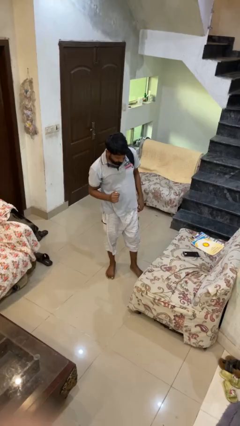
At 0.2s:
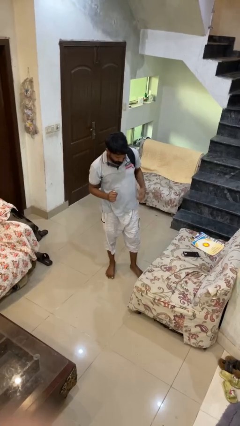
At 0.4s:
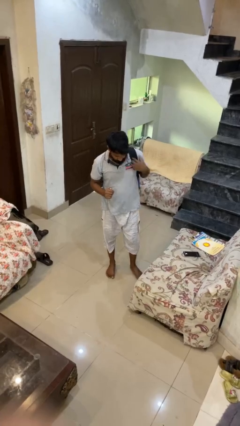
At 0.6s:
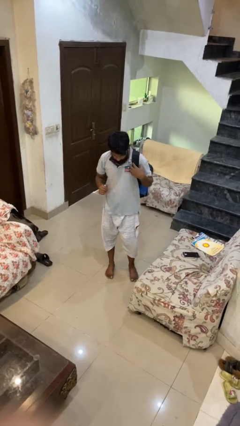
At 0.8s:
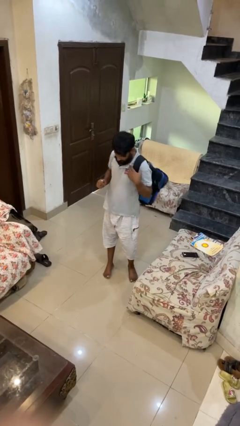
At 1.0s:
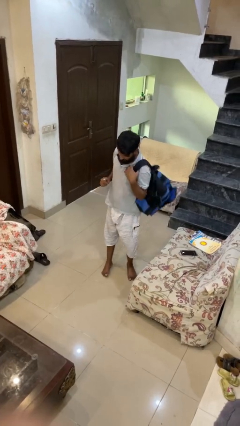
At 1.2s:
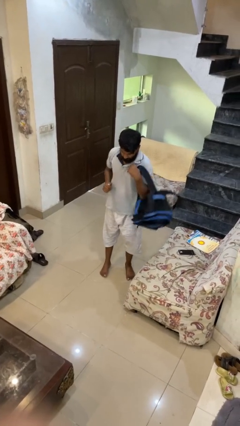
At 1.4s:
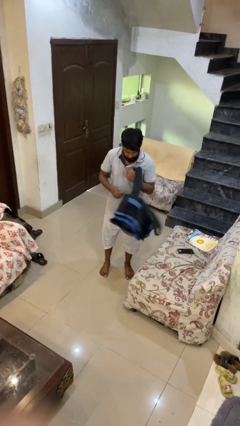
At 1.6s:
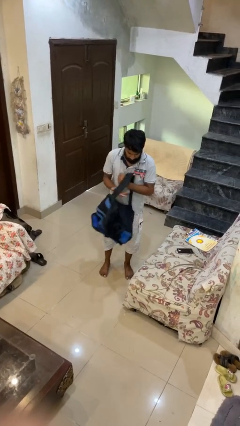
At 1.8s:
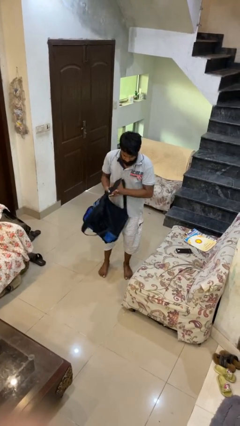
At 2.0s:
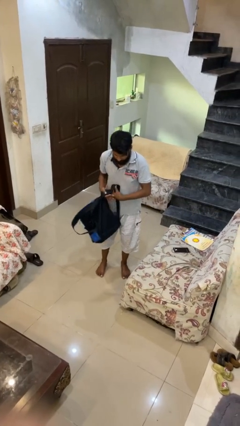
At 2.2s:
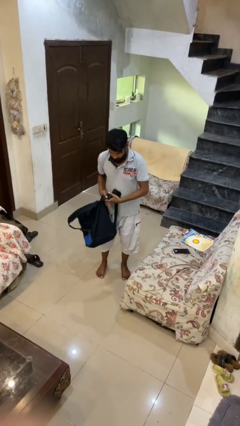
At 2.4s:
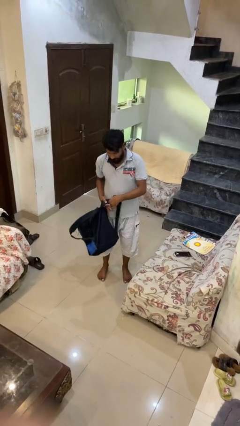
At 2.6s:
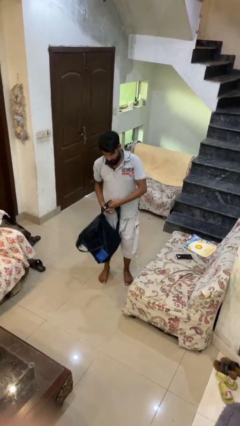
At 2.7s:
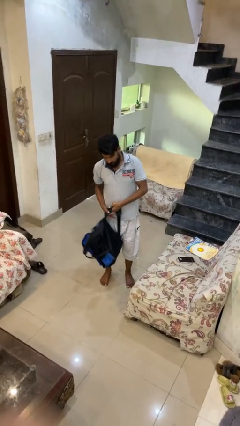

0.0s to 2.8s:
person takes off backpack

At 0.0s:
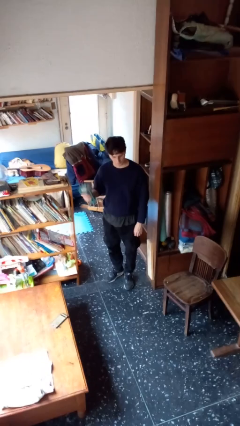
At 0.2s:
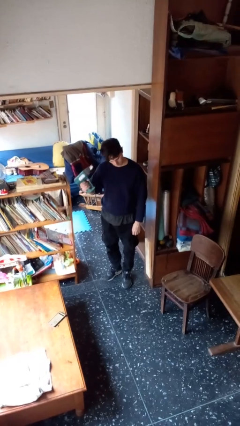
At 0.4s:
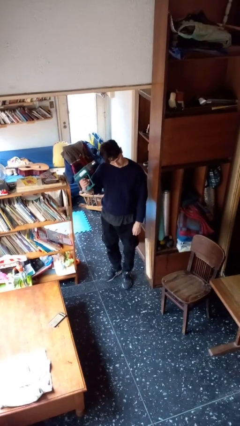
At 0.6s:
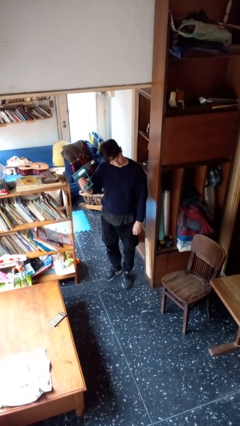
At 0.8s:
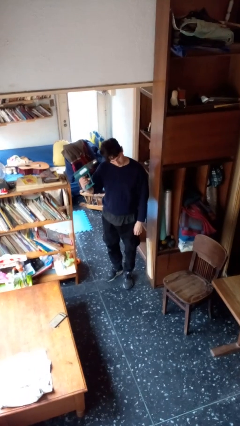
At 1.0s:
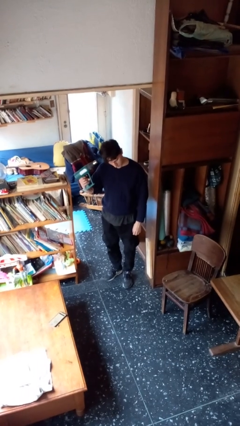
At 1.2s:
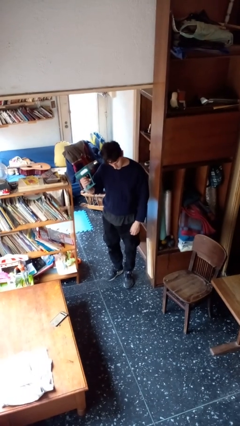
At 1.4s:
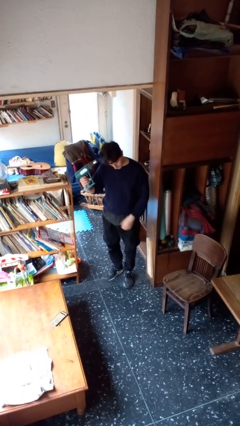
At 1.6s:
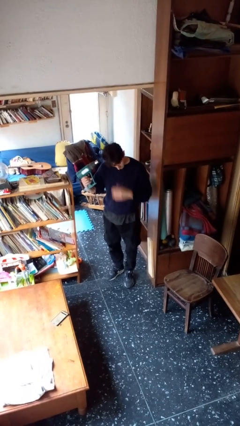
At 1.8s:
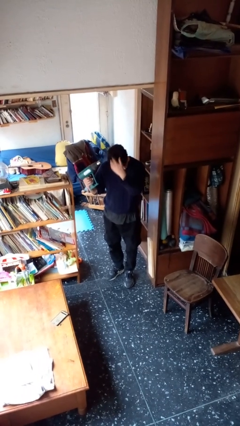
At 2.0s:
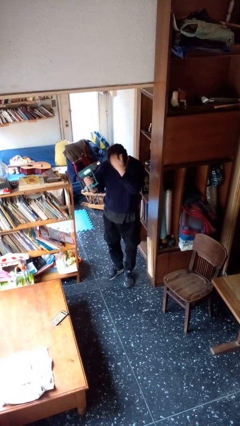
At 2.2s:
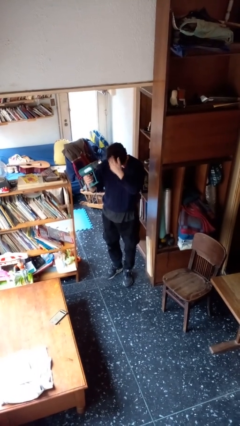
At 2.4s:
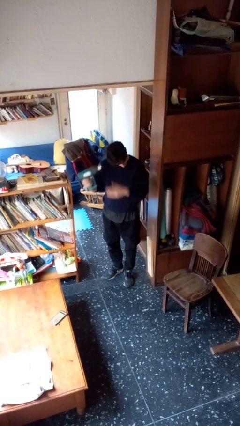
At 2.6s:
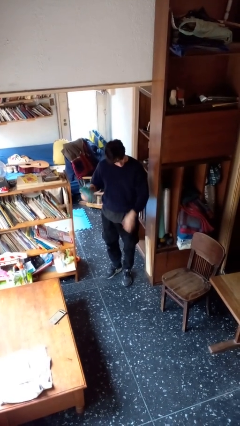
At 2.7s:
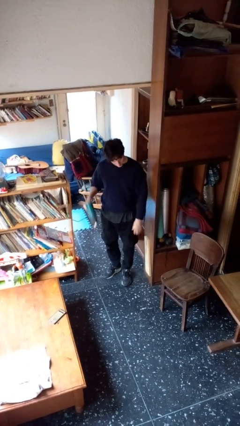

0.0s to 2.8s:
person dries hair with hairdryer

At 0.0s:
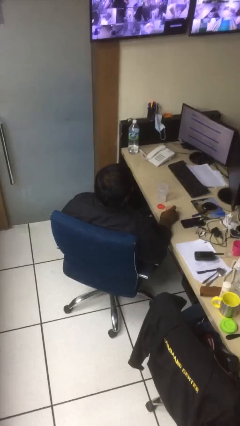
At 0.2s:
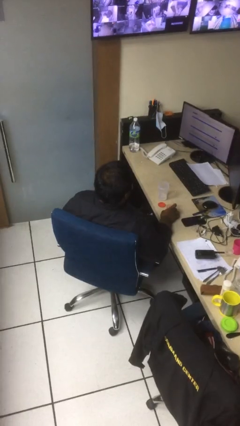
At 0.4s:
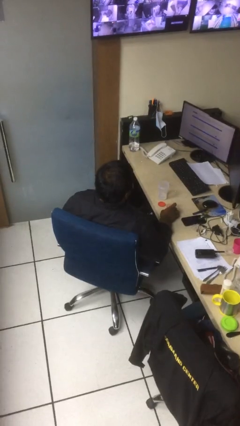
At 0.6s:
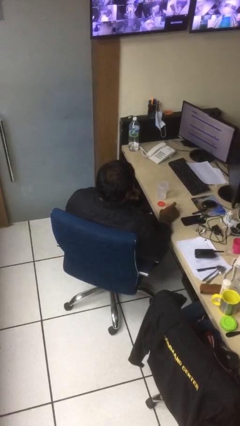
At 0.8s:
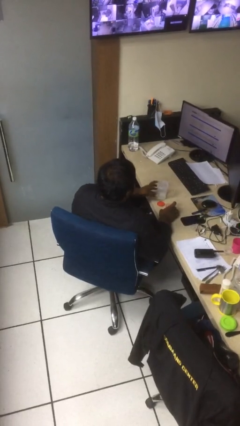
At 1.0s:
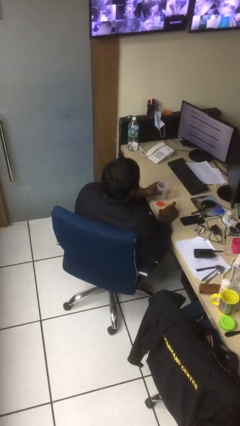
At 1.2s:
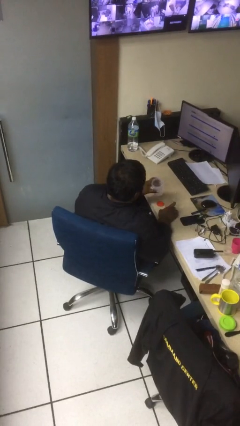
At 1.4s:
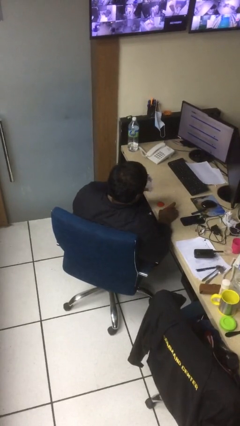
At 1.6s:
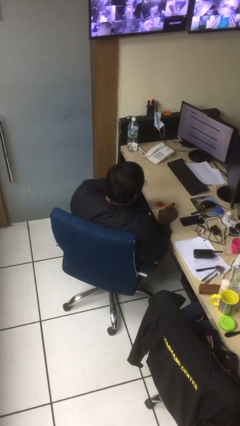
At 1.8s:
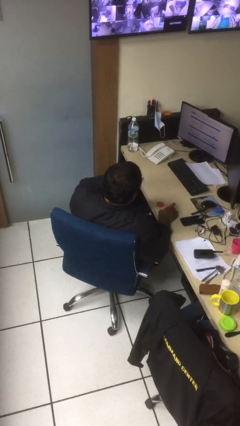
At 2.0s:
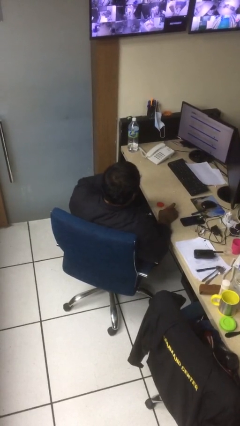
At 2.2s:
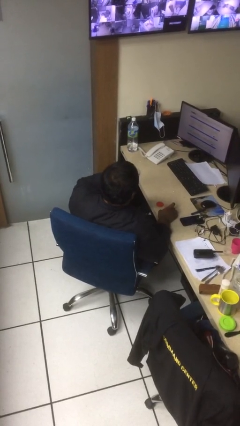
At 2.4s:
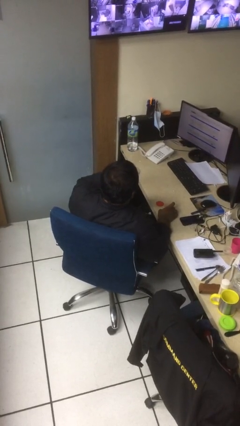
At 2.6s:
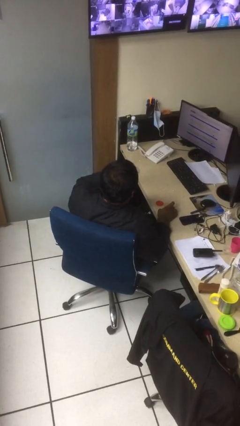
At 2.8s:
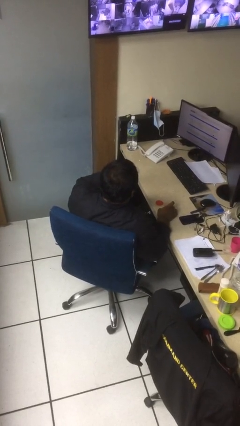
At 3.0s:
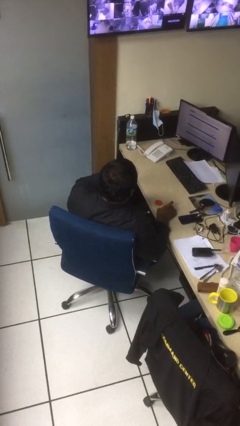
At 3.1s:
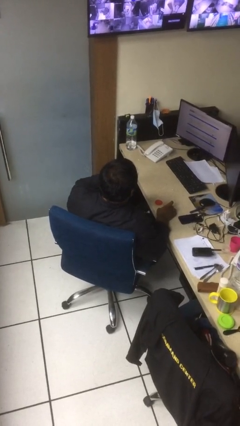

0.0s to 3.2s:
person drinks from cup

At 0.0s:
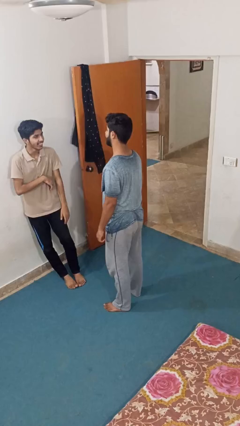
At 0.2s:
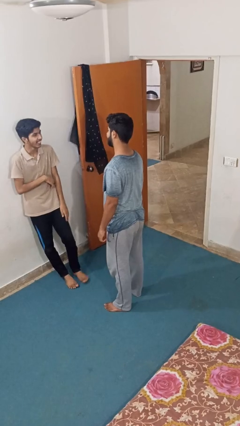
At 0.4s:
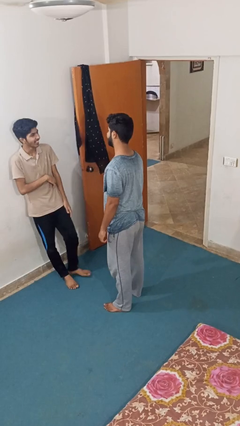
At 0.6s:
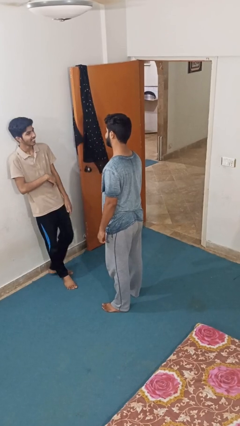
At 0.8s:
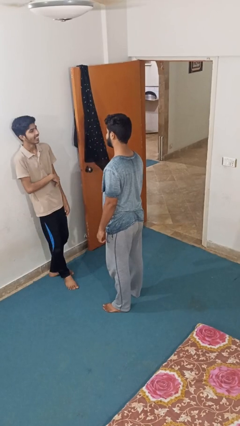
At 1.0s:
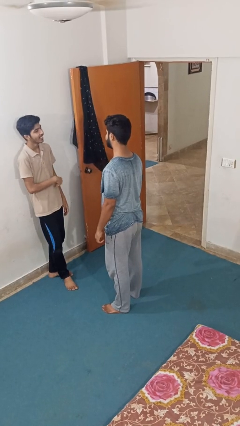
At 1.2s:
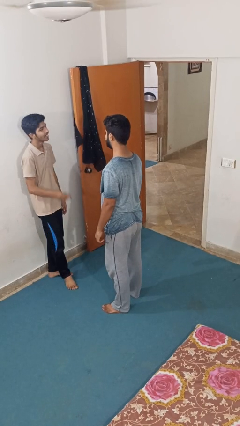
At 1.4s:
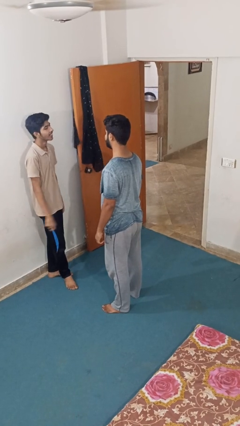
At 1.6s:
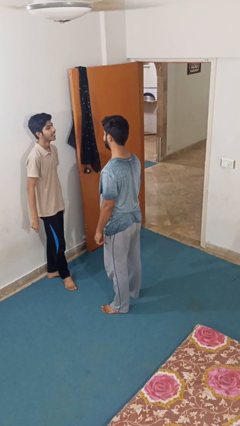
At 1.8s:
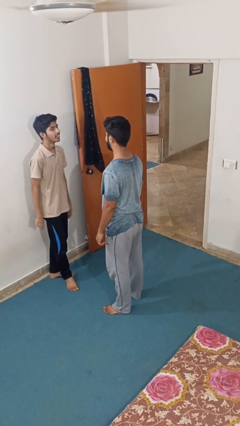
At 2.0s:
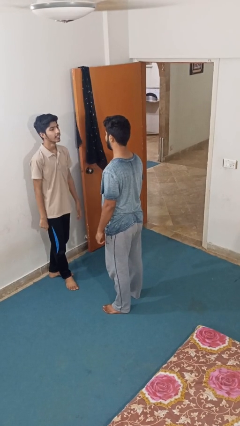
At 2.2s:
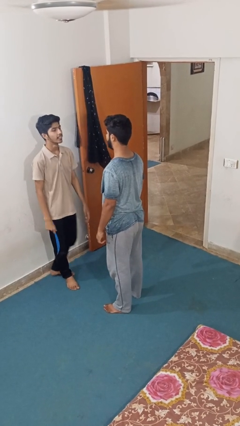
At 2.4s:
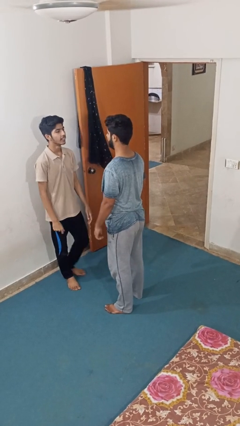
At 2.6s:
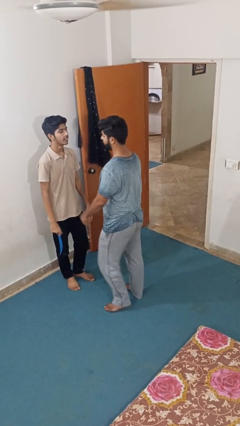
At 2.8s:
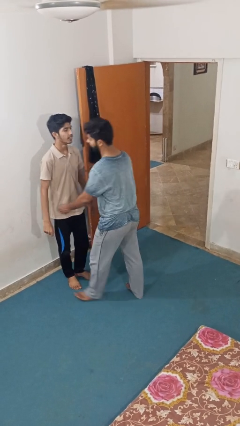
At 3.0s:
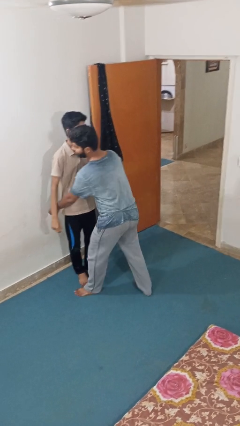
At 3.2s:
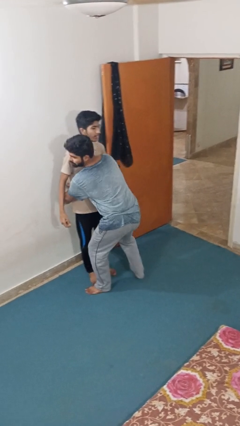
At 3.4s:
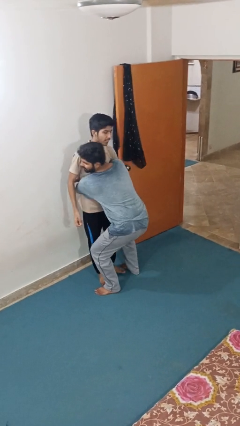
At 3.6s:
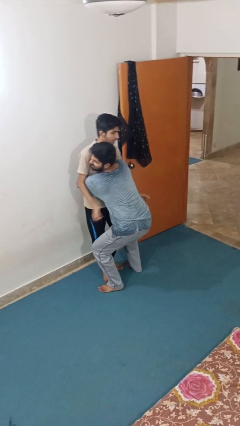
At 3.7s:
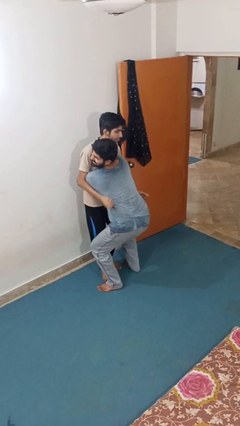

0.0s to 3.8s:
person picks up person

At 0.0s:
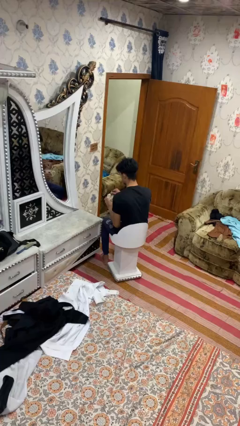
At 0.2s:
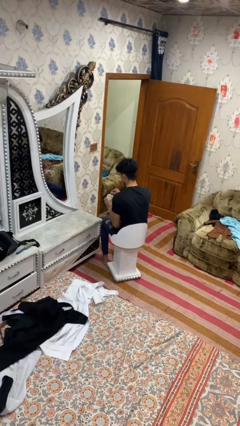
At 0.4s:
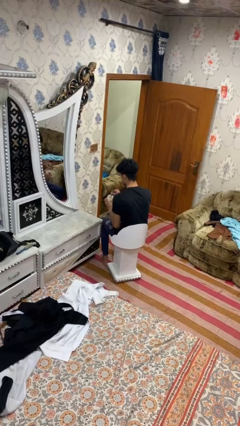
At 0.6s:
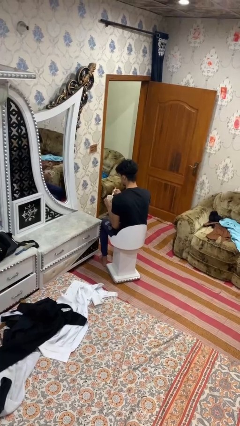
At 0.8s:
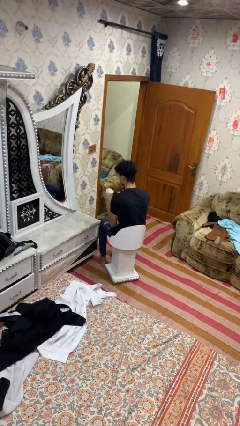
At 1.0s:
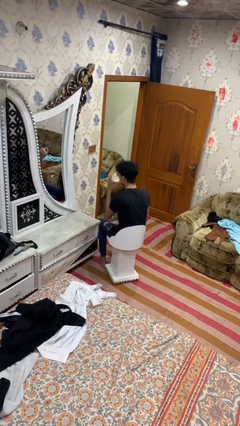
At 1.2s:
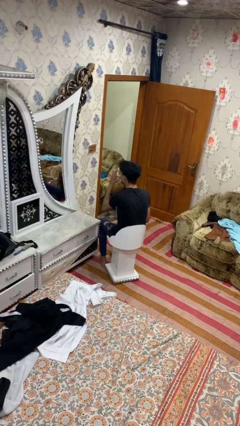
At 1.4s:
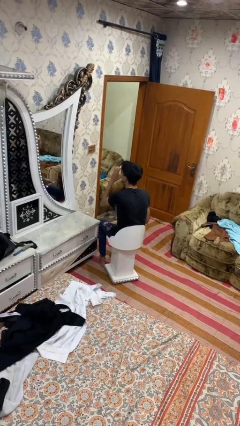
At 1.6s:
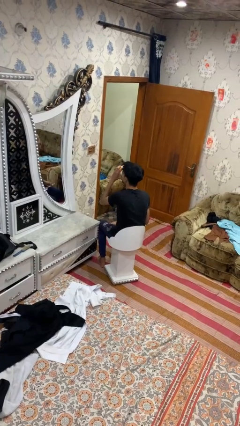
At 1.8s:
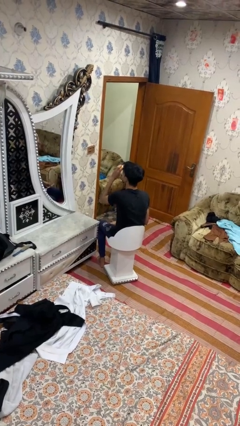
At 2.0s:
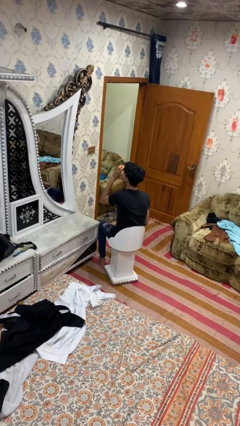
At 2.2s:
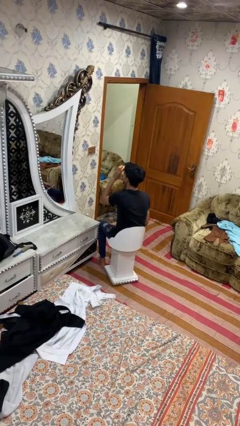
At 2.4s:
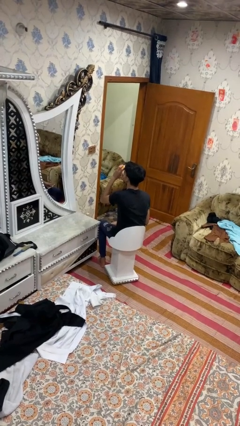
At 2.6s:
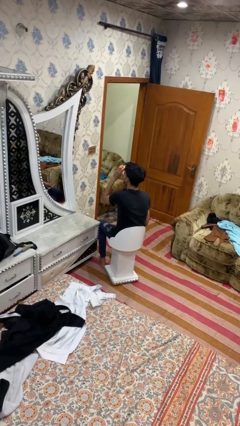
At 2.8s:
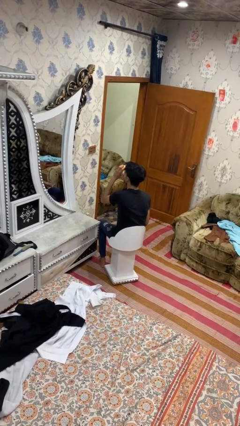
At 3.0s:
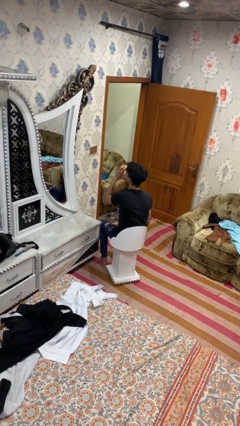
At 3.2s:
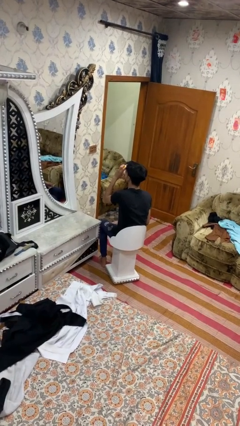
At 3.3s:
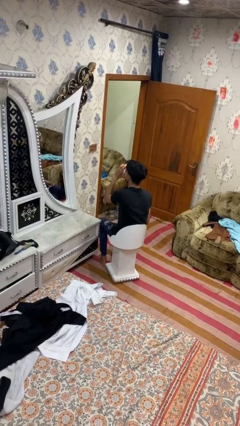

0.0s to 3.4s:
person drinks from mug

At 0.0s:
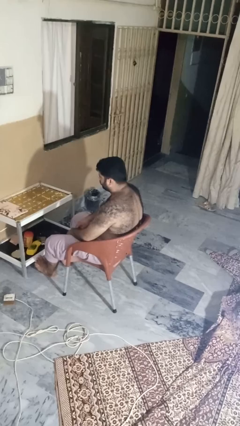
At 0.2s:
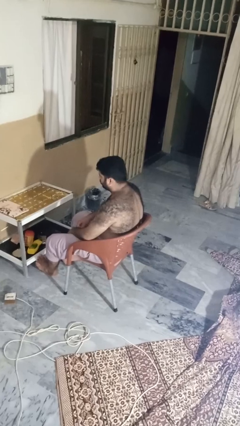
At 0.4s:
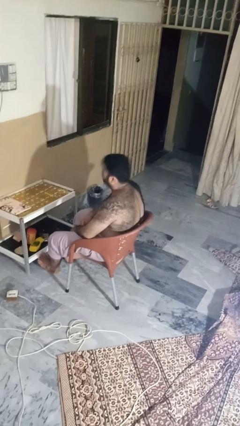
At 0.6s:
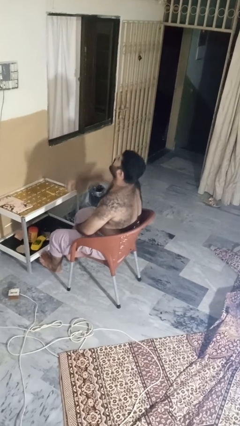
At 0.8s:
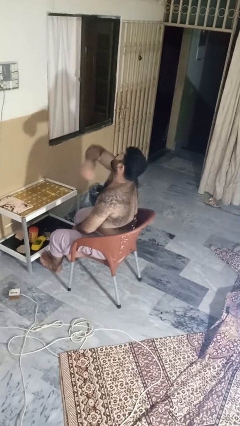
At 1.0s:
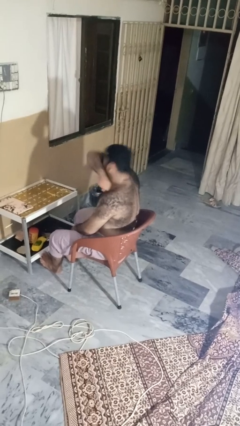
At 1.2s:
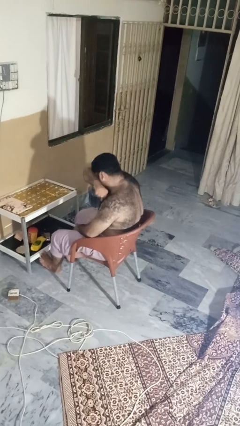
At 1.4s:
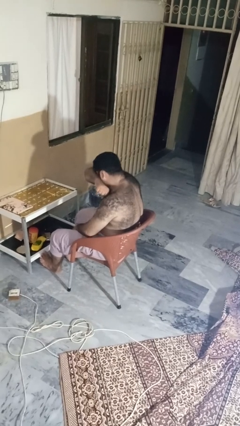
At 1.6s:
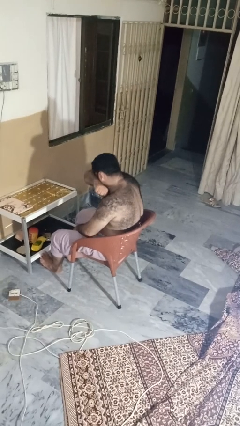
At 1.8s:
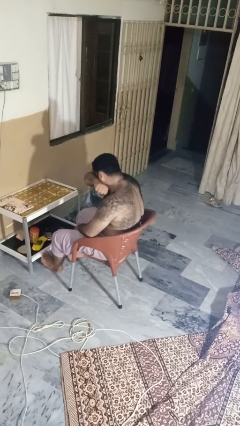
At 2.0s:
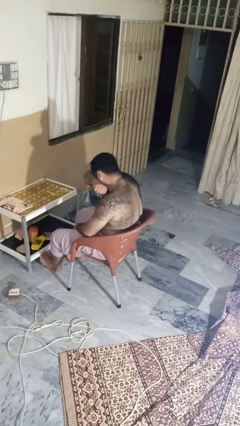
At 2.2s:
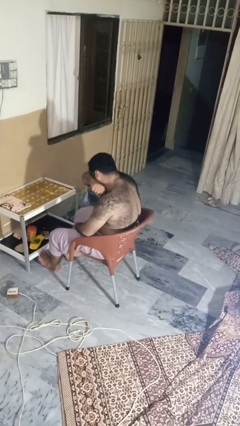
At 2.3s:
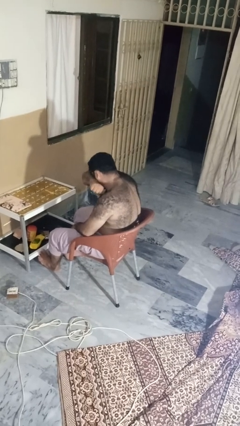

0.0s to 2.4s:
person sneezes into arm
